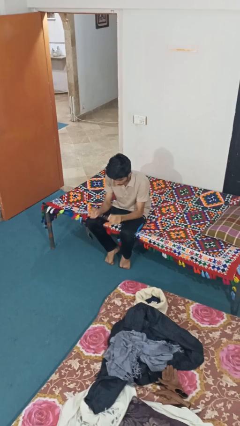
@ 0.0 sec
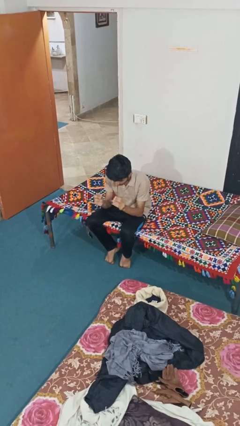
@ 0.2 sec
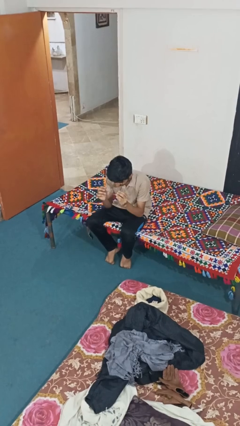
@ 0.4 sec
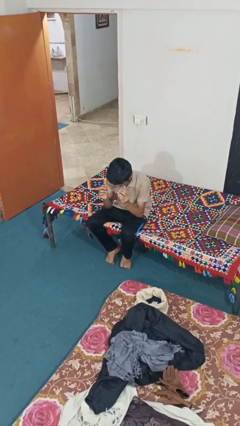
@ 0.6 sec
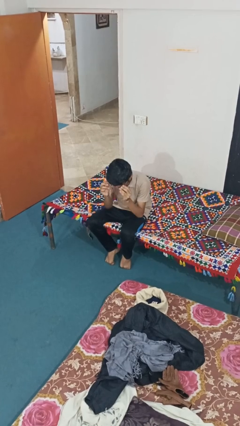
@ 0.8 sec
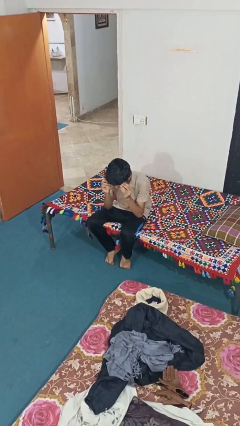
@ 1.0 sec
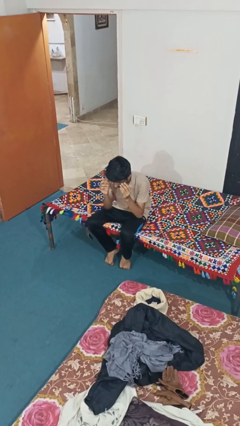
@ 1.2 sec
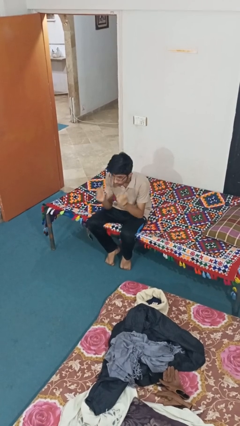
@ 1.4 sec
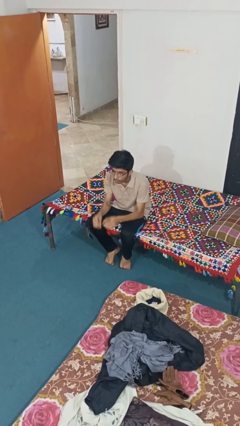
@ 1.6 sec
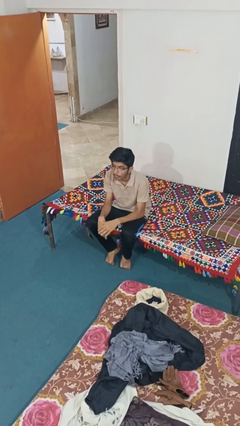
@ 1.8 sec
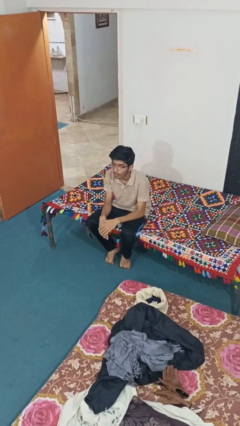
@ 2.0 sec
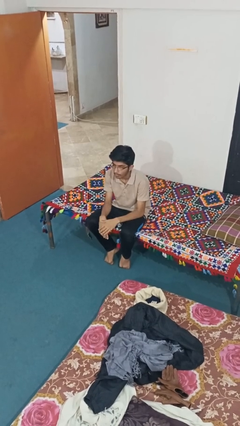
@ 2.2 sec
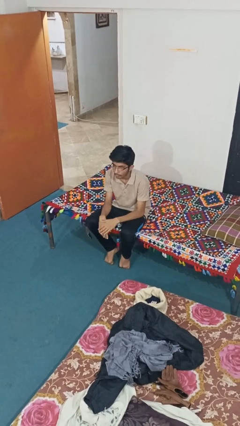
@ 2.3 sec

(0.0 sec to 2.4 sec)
person puts on glasses

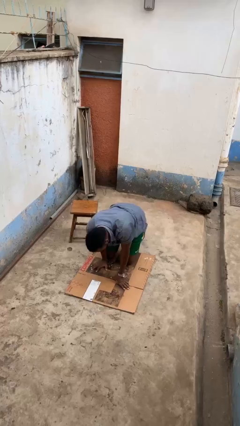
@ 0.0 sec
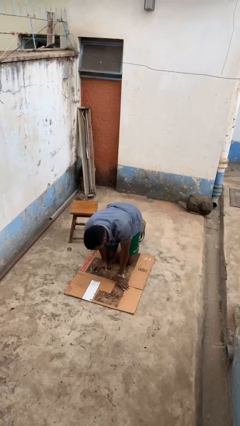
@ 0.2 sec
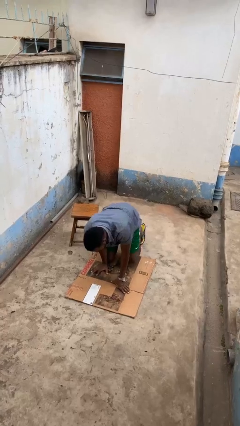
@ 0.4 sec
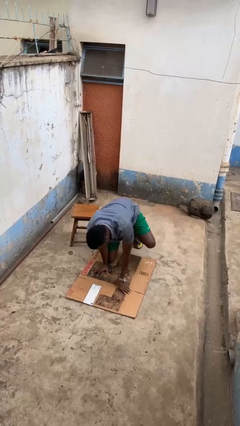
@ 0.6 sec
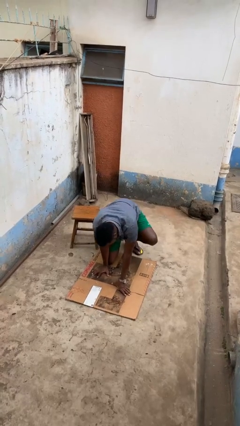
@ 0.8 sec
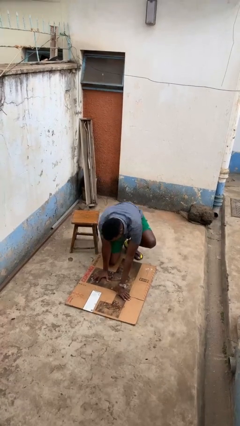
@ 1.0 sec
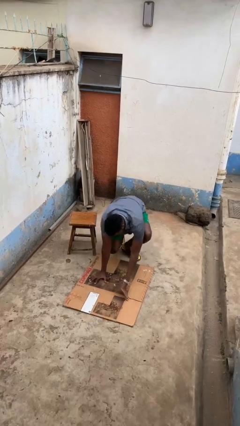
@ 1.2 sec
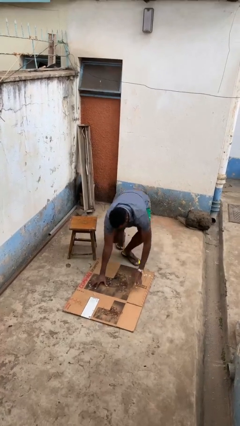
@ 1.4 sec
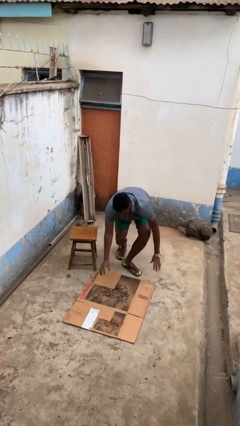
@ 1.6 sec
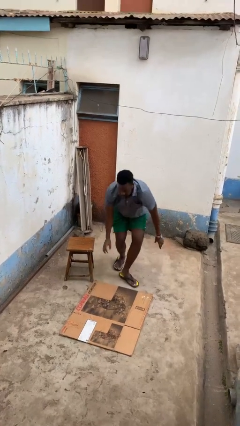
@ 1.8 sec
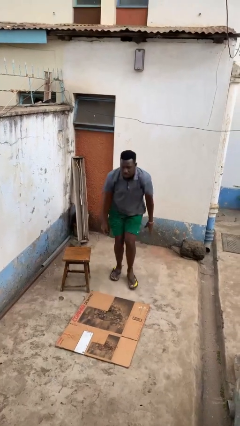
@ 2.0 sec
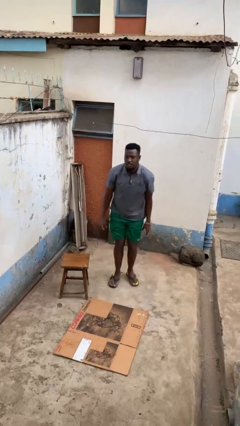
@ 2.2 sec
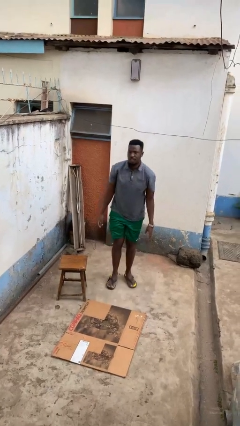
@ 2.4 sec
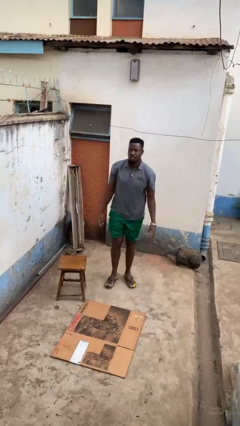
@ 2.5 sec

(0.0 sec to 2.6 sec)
person stands up from floor

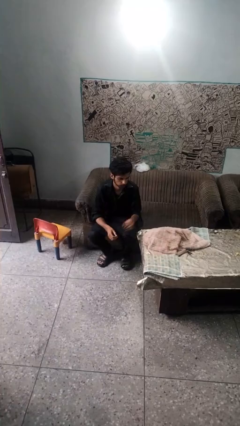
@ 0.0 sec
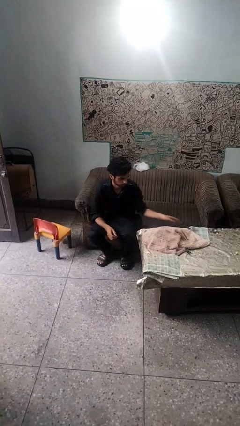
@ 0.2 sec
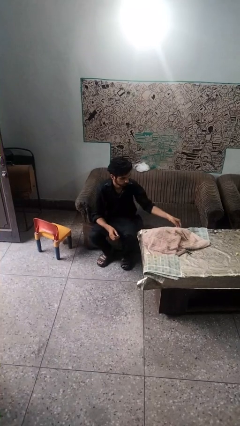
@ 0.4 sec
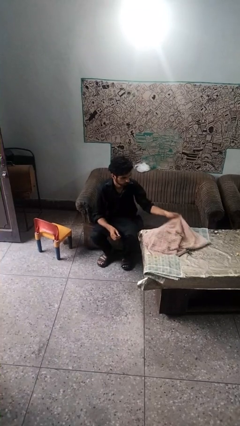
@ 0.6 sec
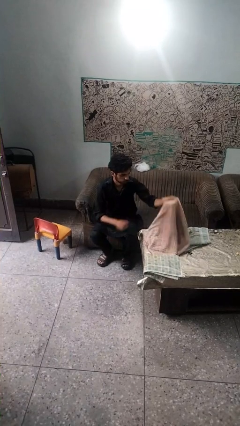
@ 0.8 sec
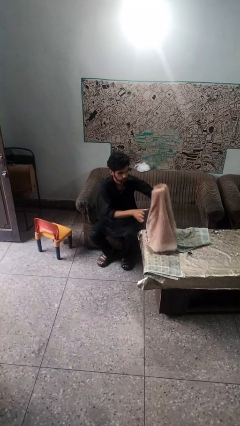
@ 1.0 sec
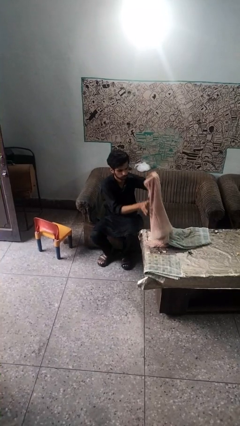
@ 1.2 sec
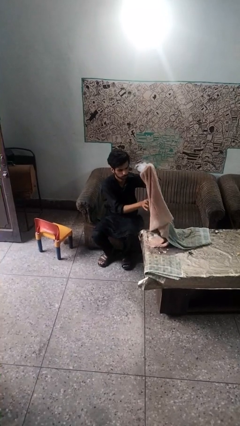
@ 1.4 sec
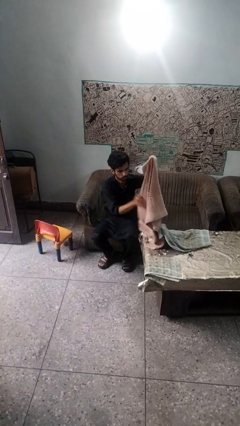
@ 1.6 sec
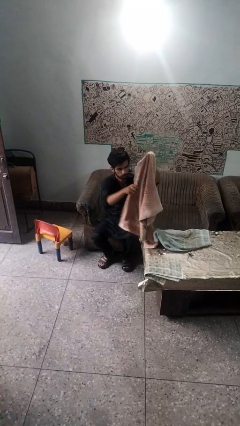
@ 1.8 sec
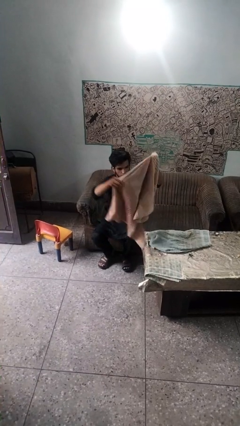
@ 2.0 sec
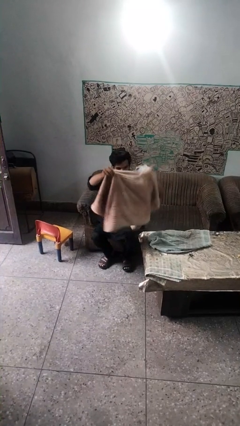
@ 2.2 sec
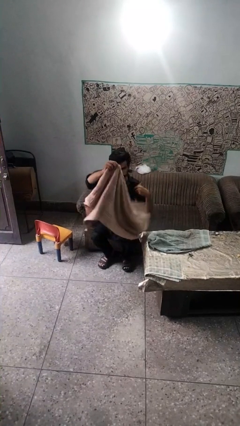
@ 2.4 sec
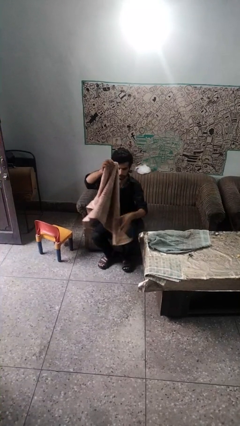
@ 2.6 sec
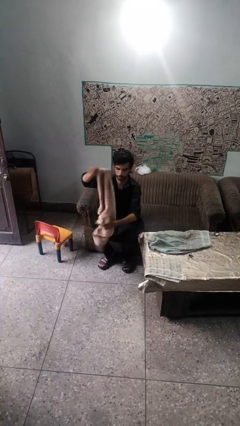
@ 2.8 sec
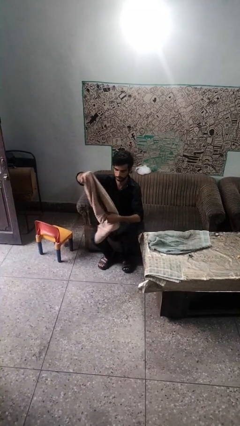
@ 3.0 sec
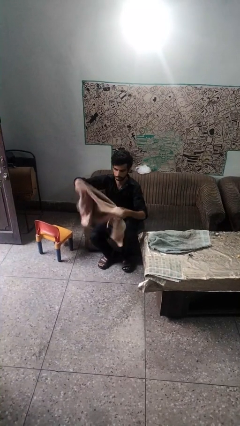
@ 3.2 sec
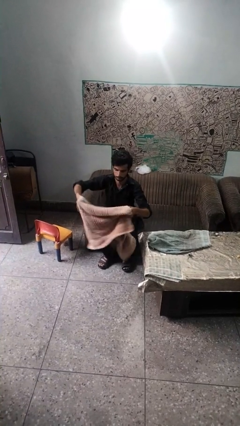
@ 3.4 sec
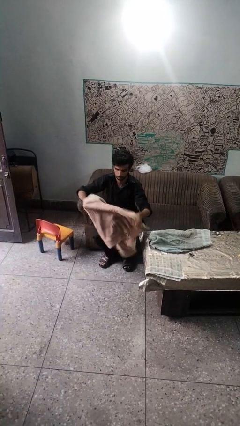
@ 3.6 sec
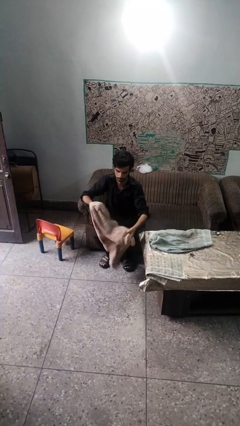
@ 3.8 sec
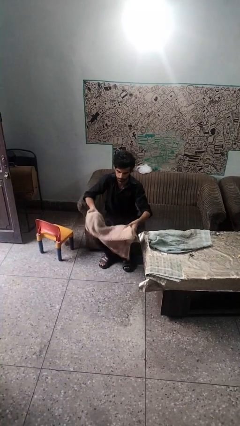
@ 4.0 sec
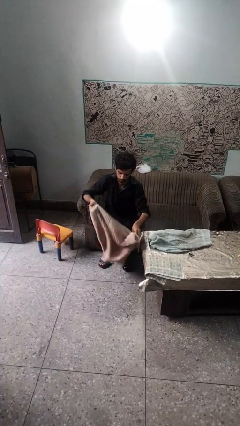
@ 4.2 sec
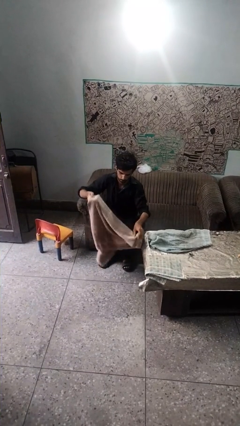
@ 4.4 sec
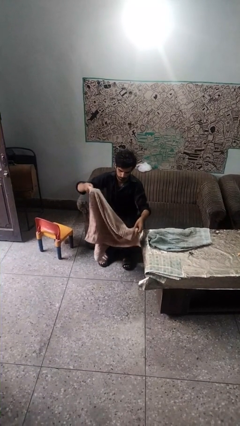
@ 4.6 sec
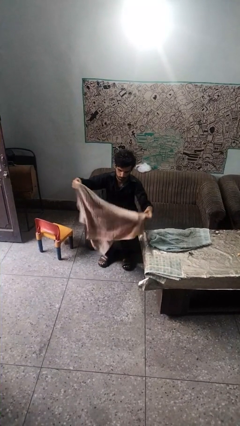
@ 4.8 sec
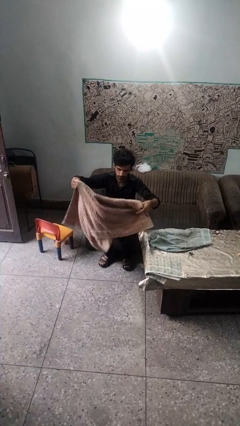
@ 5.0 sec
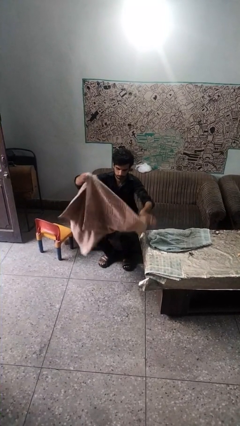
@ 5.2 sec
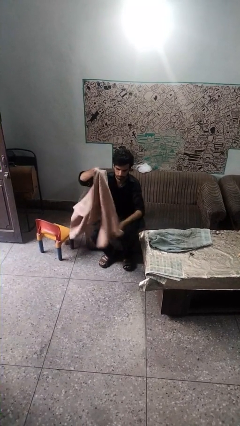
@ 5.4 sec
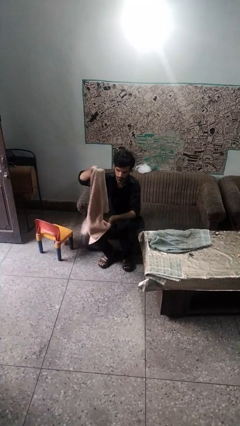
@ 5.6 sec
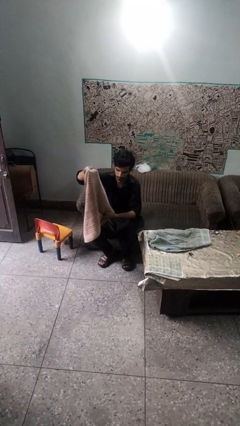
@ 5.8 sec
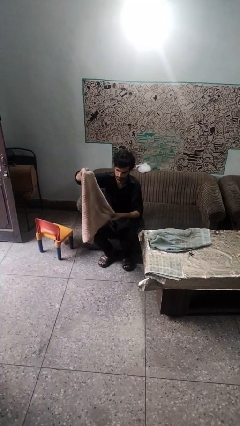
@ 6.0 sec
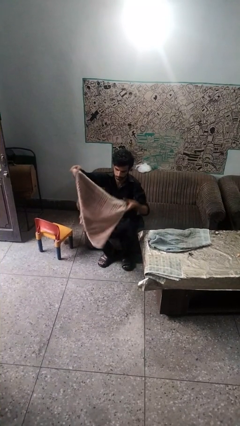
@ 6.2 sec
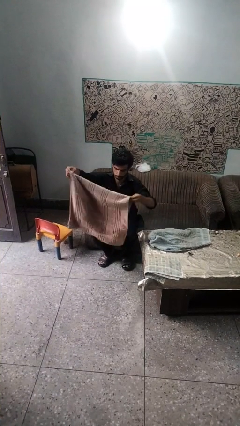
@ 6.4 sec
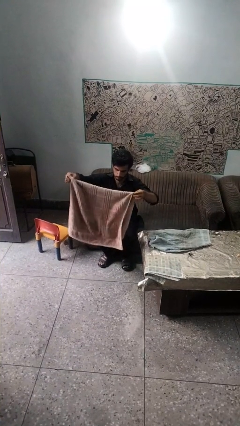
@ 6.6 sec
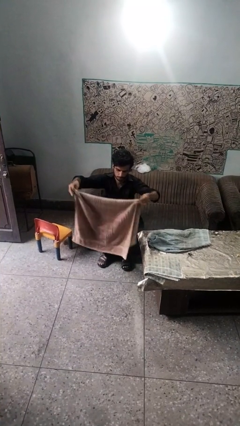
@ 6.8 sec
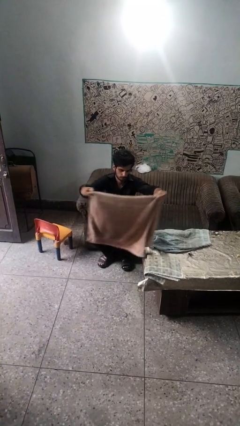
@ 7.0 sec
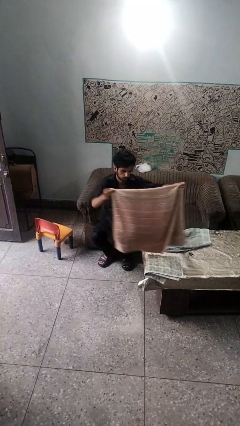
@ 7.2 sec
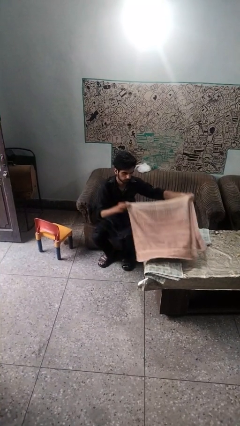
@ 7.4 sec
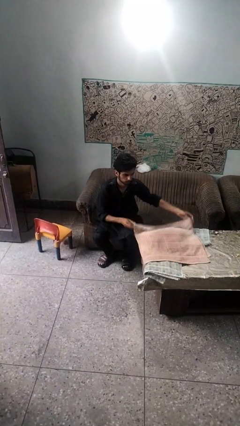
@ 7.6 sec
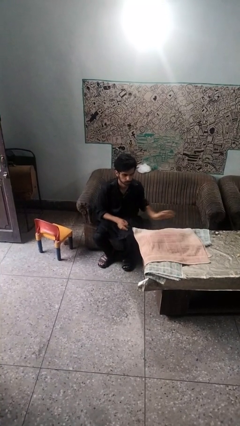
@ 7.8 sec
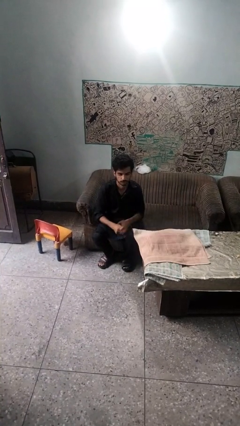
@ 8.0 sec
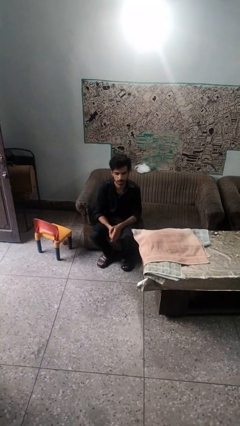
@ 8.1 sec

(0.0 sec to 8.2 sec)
person folds towel

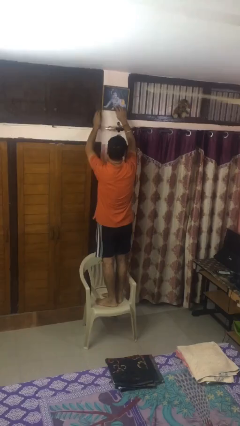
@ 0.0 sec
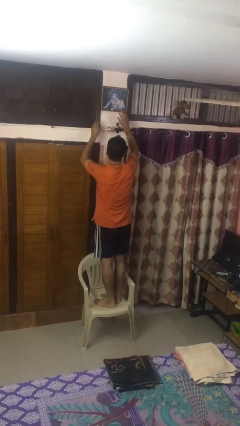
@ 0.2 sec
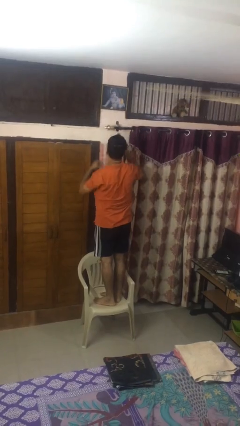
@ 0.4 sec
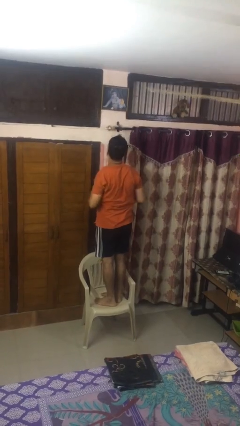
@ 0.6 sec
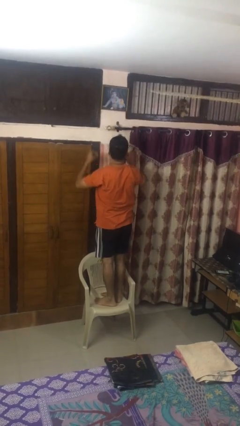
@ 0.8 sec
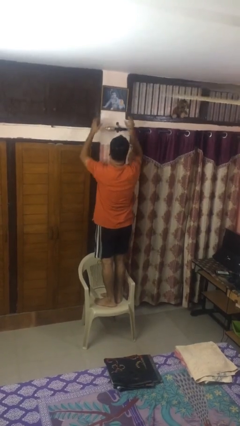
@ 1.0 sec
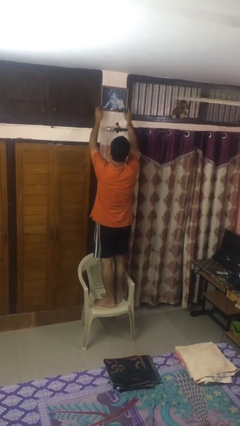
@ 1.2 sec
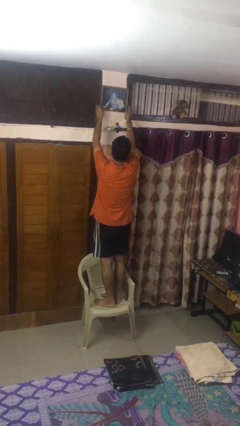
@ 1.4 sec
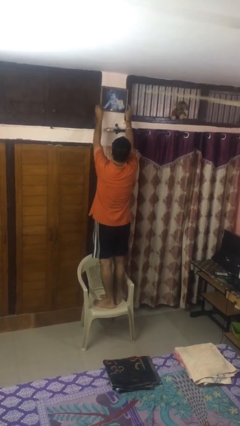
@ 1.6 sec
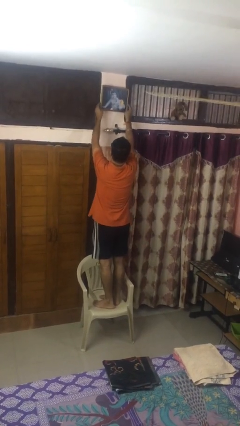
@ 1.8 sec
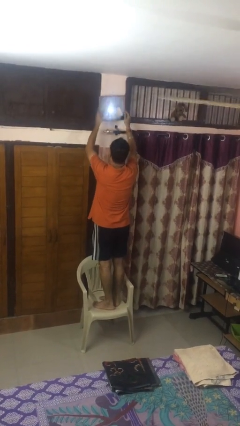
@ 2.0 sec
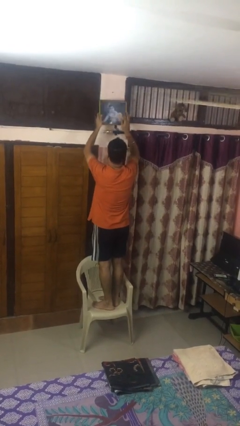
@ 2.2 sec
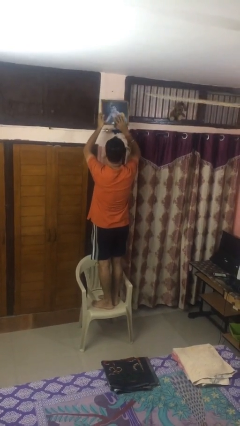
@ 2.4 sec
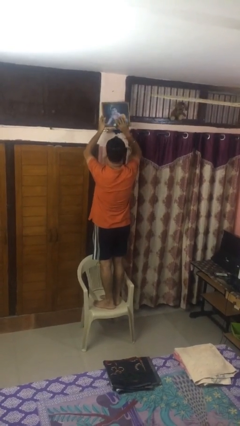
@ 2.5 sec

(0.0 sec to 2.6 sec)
person takes down picture frame

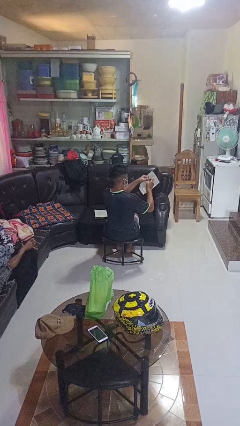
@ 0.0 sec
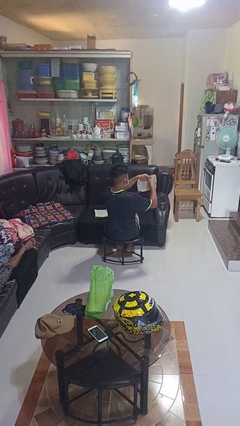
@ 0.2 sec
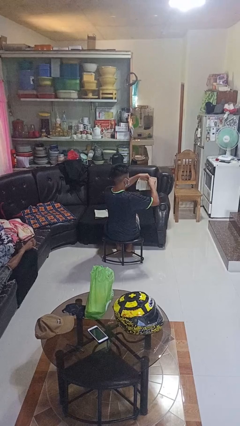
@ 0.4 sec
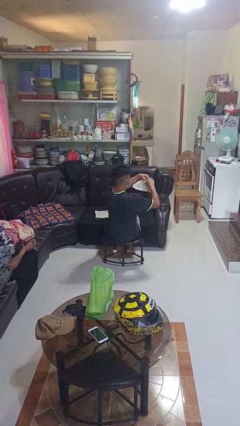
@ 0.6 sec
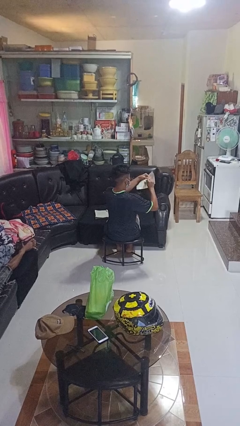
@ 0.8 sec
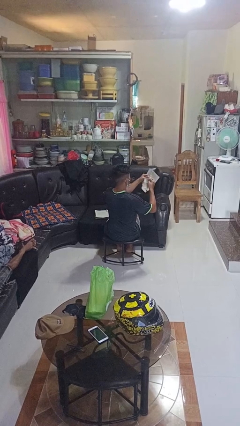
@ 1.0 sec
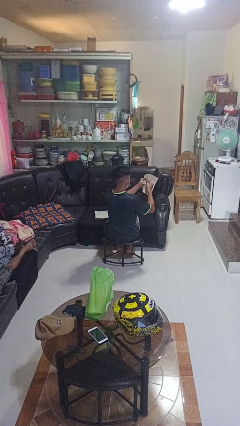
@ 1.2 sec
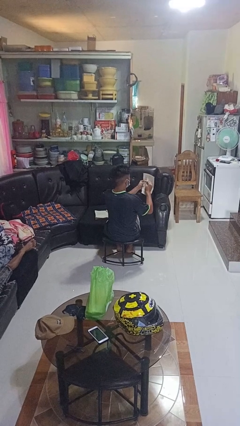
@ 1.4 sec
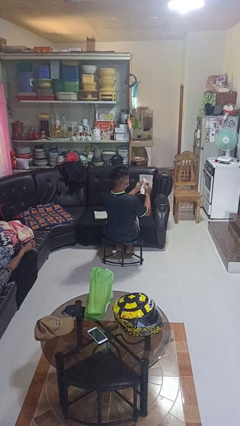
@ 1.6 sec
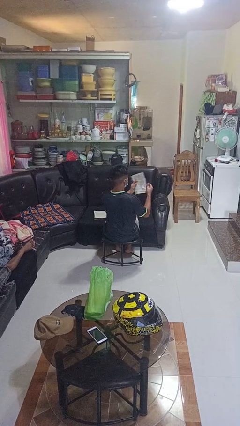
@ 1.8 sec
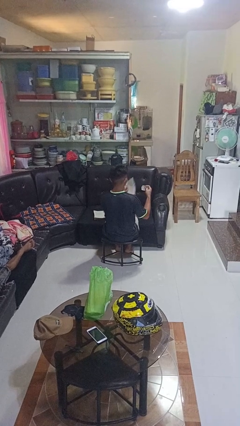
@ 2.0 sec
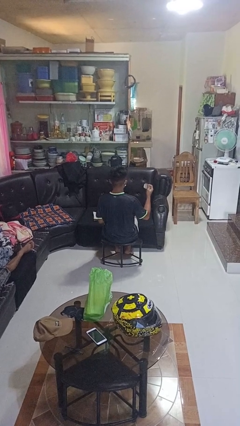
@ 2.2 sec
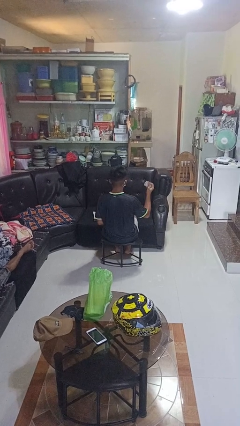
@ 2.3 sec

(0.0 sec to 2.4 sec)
person tears paper
